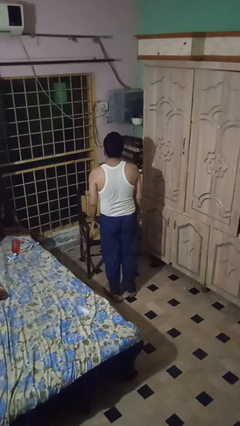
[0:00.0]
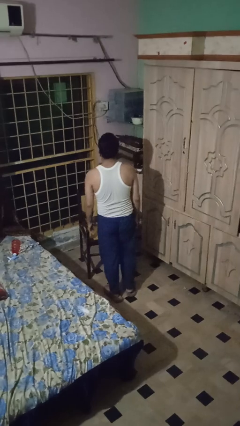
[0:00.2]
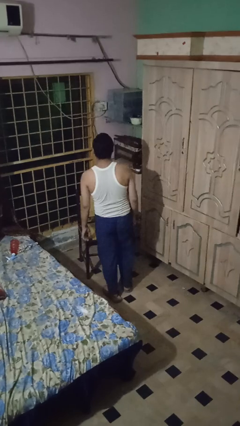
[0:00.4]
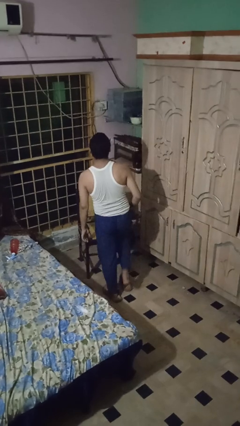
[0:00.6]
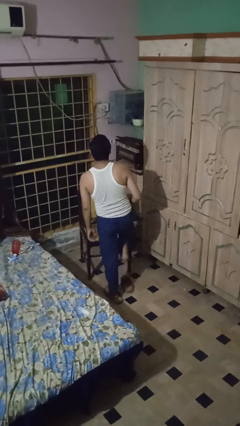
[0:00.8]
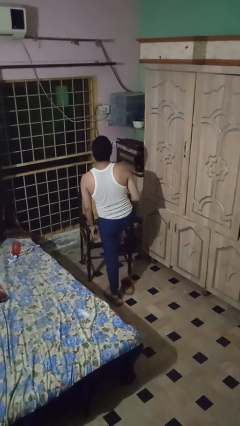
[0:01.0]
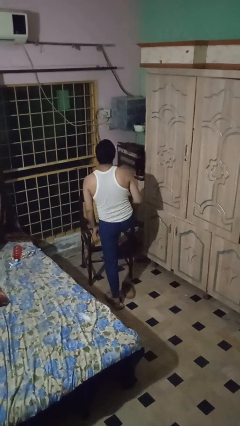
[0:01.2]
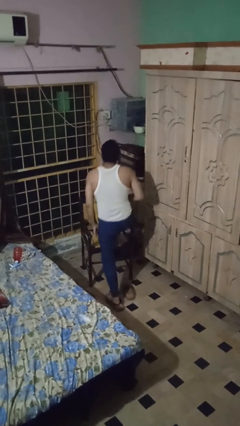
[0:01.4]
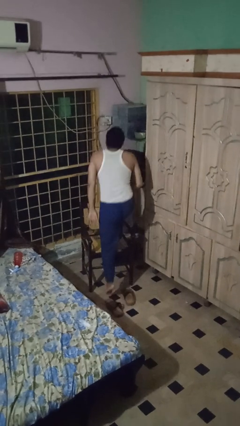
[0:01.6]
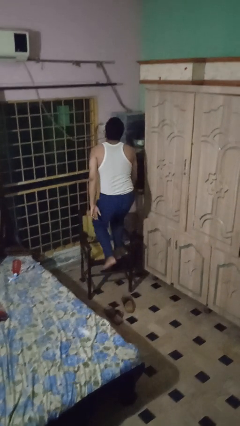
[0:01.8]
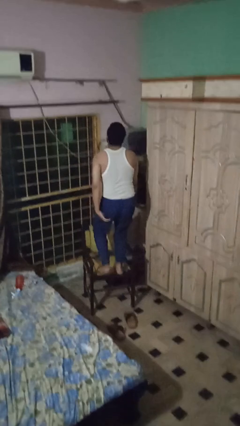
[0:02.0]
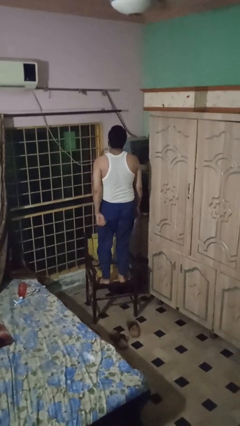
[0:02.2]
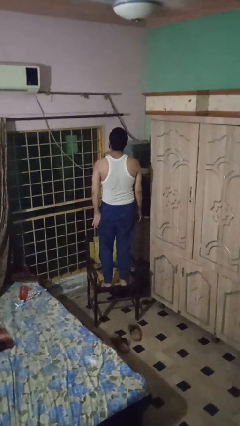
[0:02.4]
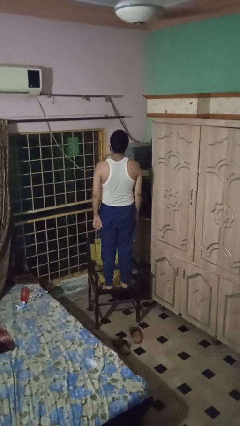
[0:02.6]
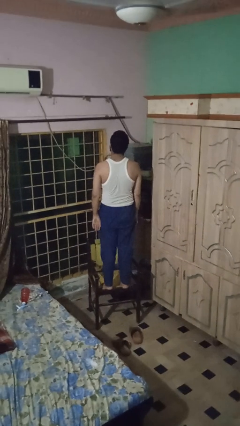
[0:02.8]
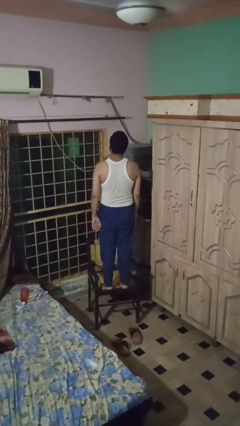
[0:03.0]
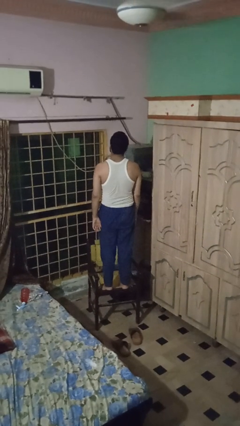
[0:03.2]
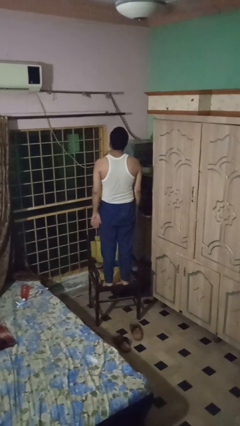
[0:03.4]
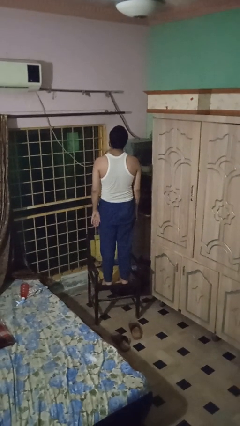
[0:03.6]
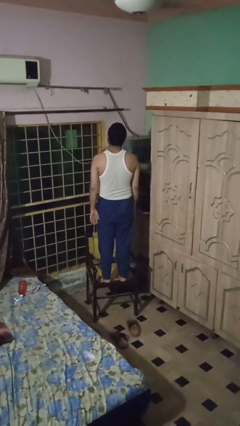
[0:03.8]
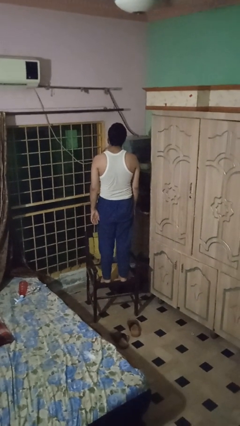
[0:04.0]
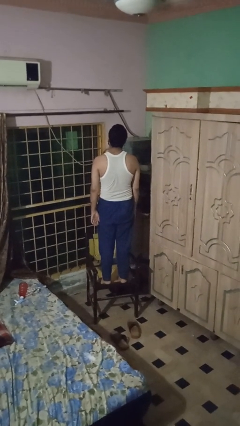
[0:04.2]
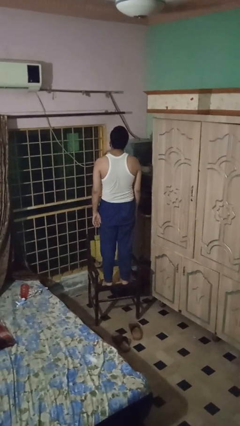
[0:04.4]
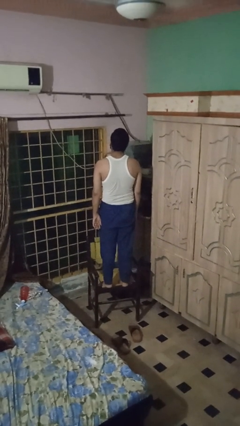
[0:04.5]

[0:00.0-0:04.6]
person climbs on chair

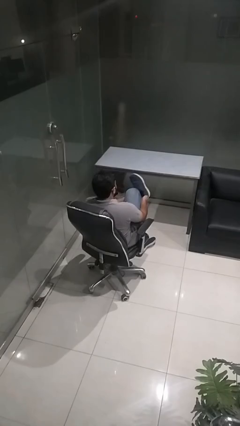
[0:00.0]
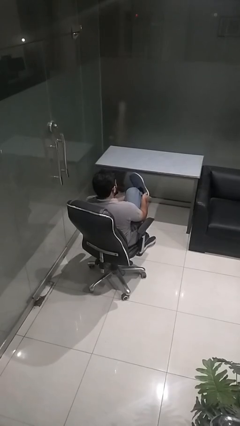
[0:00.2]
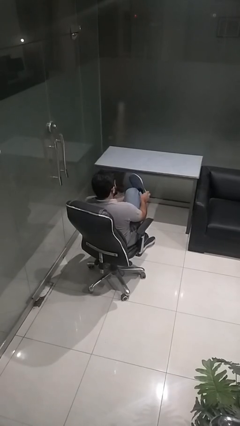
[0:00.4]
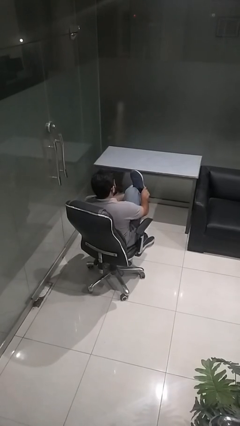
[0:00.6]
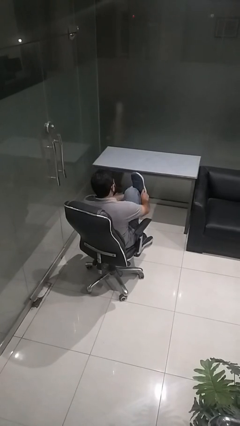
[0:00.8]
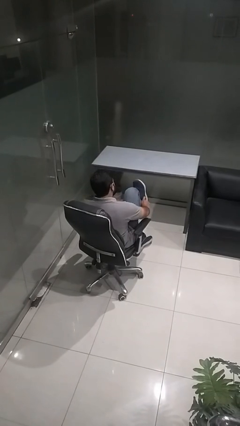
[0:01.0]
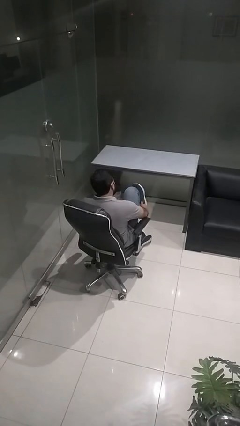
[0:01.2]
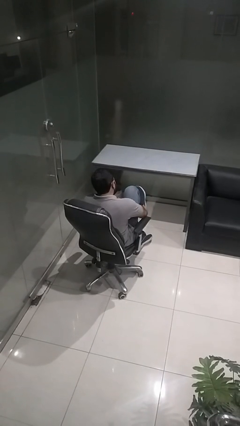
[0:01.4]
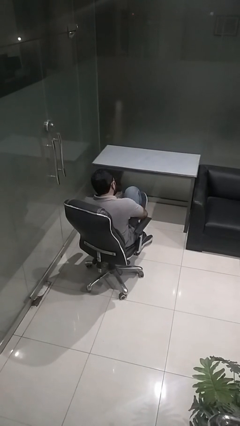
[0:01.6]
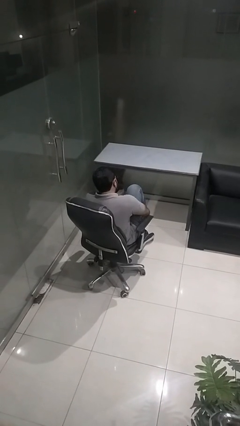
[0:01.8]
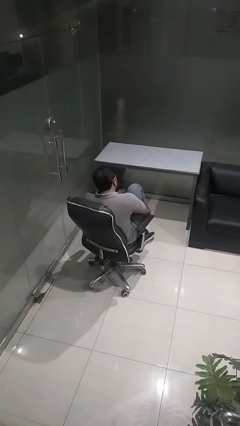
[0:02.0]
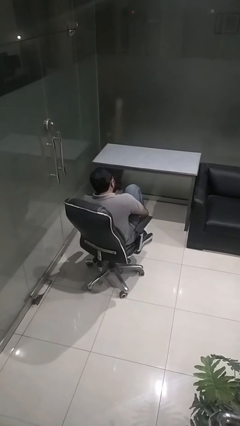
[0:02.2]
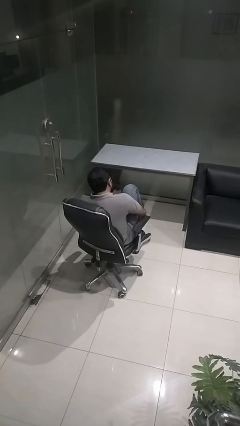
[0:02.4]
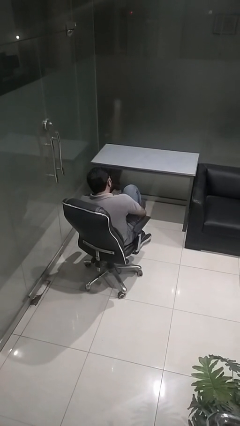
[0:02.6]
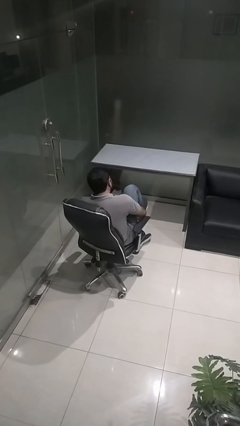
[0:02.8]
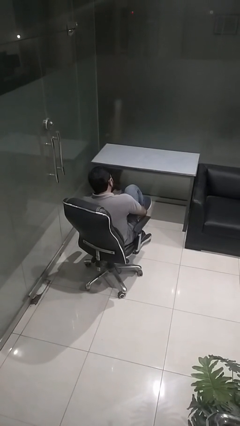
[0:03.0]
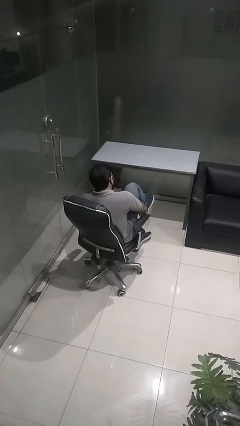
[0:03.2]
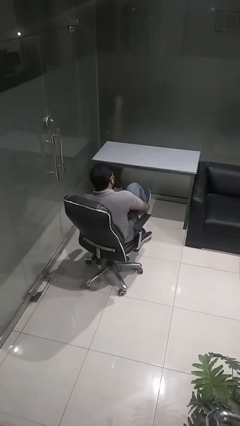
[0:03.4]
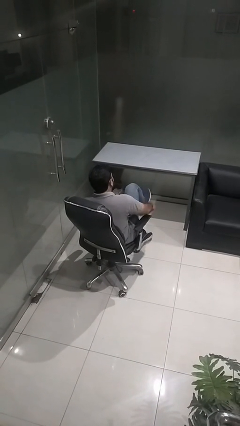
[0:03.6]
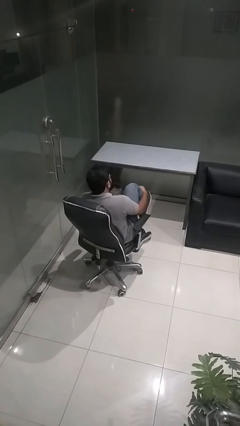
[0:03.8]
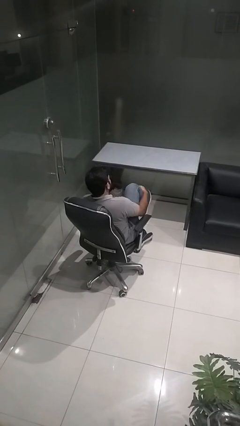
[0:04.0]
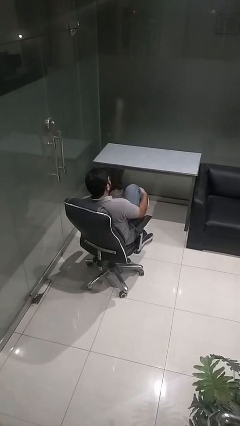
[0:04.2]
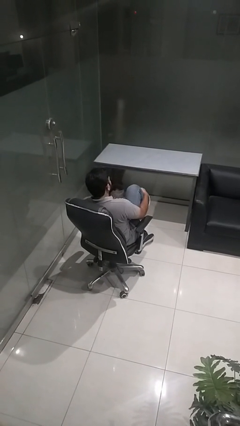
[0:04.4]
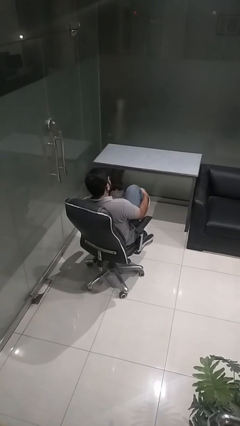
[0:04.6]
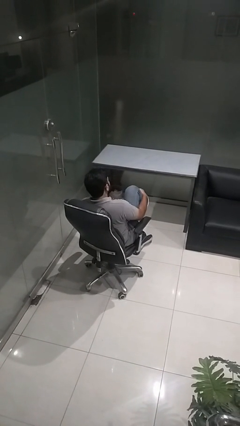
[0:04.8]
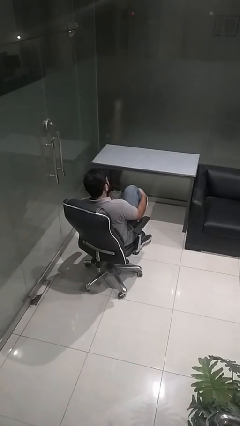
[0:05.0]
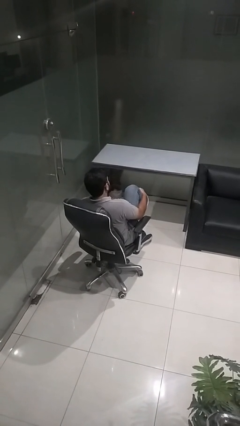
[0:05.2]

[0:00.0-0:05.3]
person puts on shoes

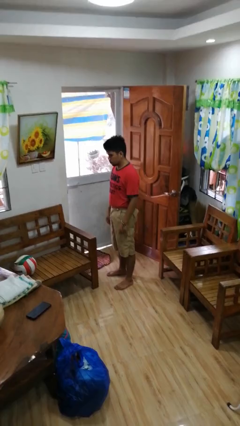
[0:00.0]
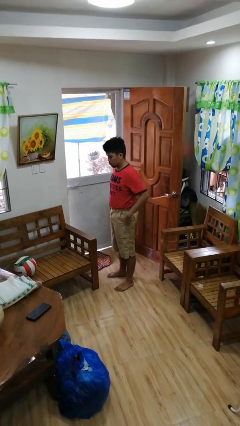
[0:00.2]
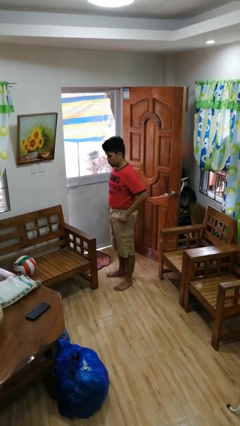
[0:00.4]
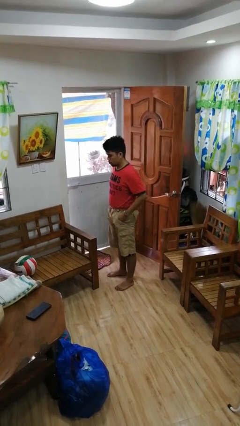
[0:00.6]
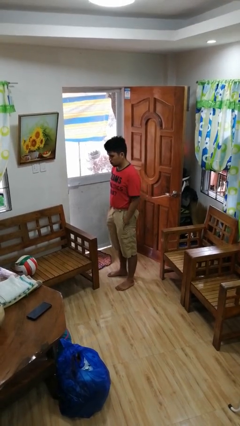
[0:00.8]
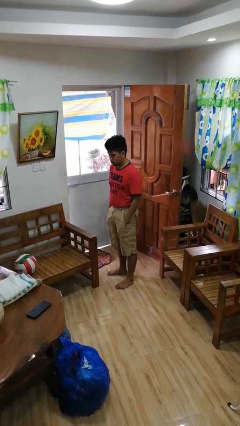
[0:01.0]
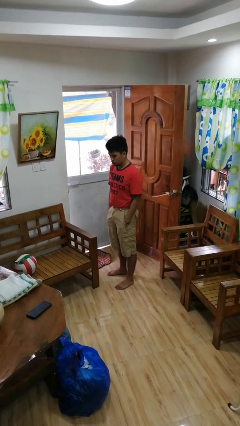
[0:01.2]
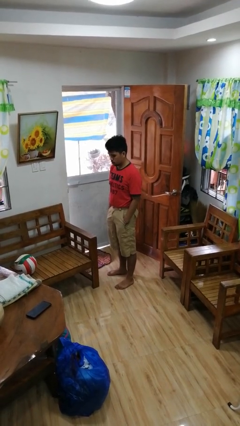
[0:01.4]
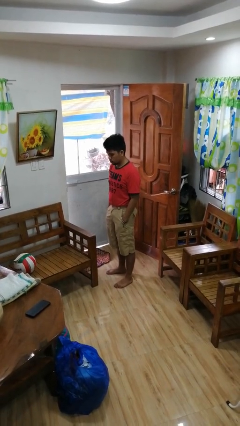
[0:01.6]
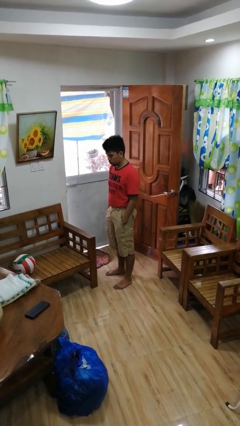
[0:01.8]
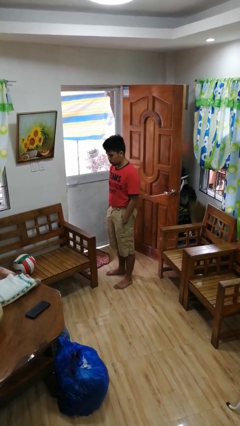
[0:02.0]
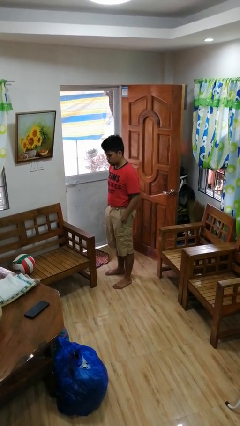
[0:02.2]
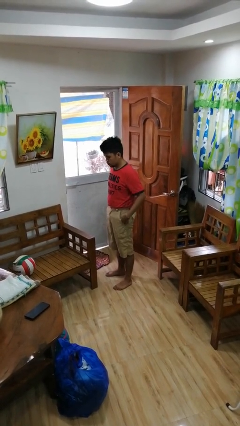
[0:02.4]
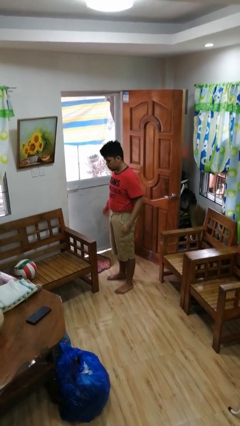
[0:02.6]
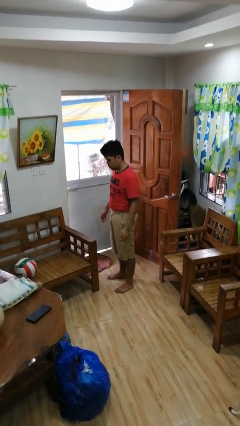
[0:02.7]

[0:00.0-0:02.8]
person puts hands in back pockets

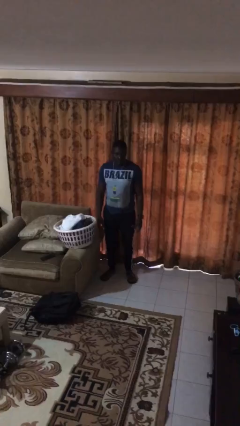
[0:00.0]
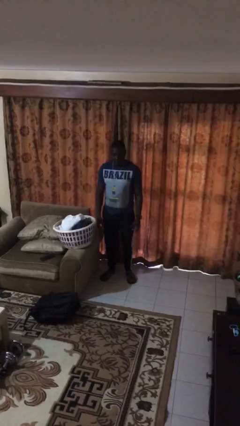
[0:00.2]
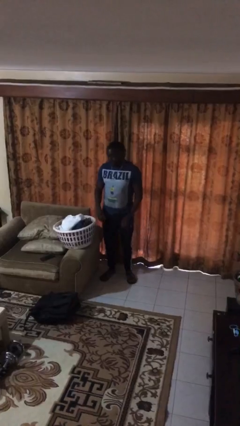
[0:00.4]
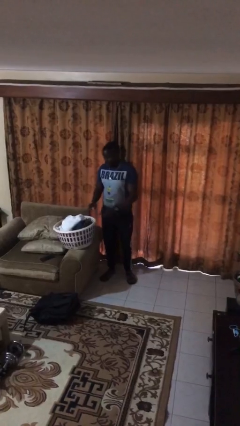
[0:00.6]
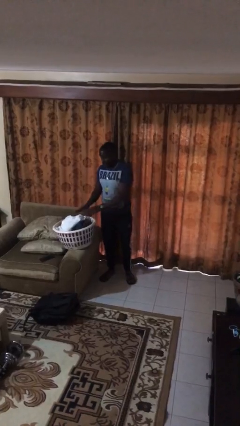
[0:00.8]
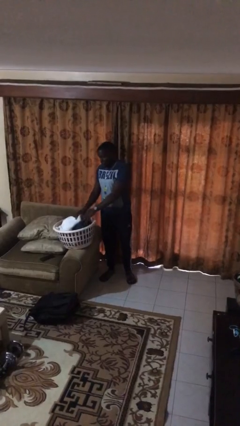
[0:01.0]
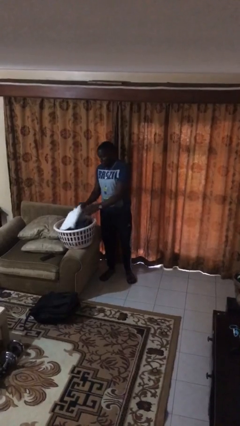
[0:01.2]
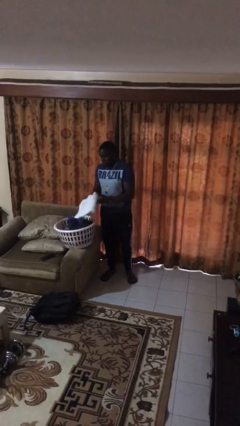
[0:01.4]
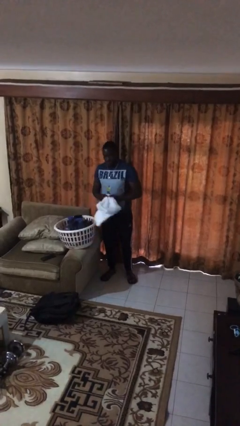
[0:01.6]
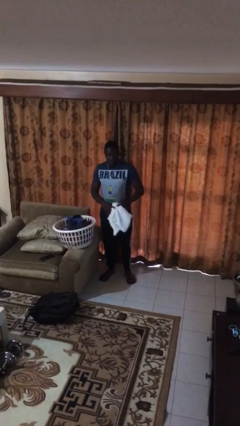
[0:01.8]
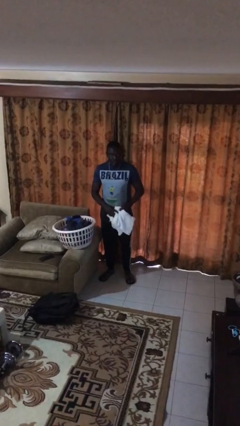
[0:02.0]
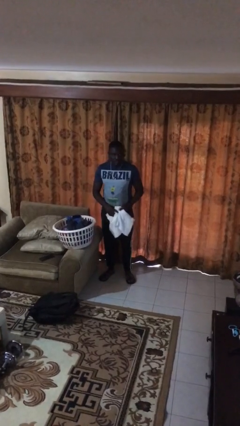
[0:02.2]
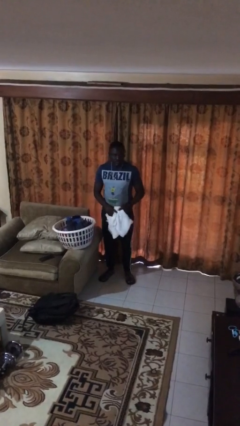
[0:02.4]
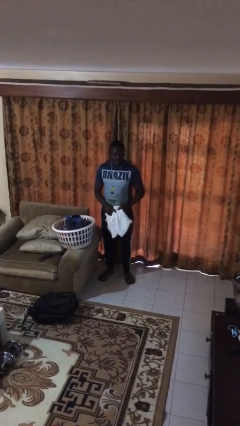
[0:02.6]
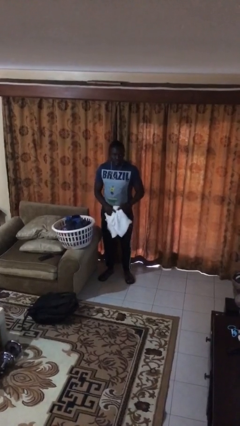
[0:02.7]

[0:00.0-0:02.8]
person takes object from basket

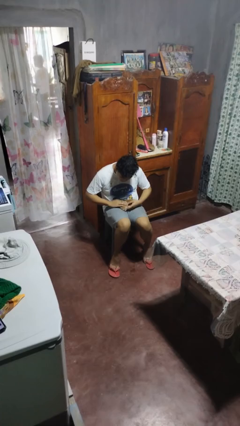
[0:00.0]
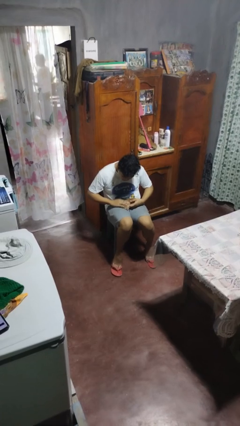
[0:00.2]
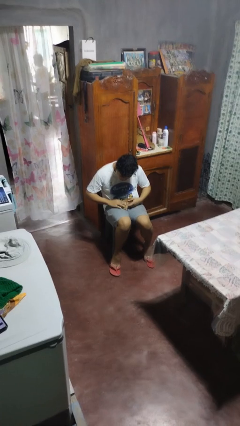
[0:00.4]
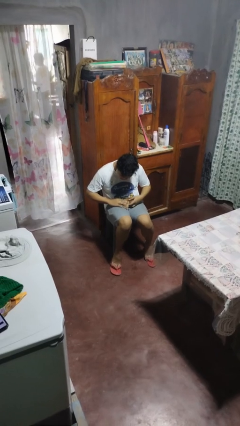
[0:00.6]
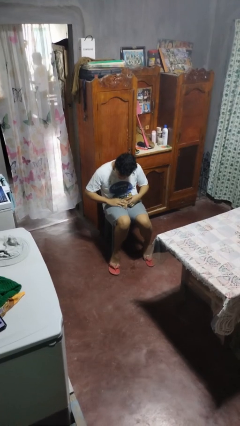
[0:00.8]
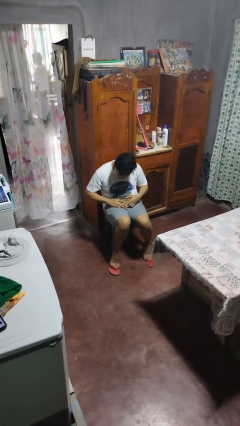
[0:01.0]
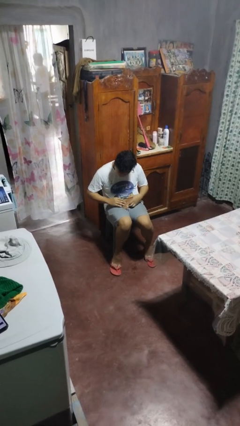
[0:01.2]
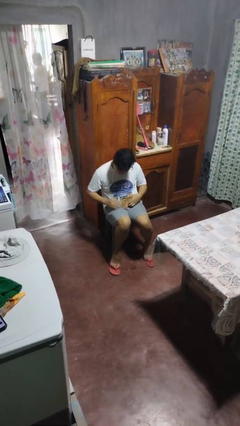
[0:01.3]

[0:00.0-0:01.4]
person pets cat

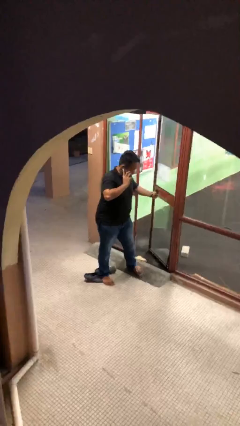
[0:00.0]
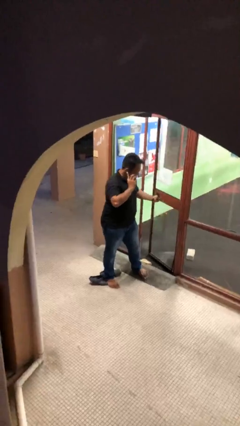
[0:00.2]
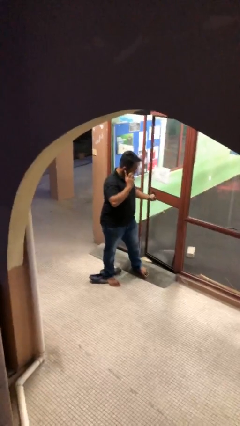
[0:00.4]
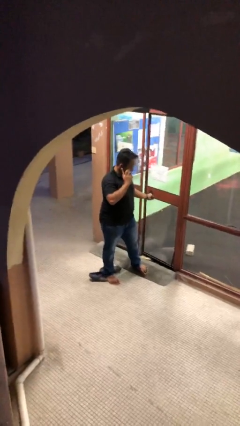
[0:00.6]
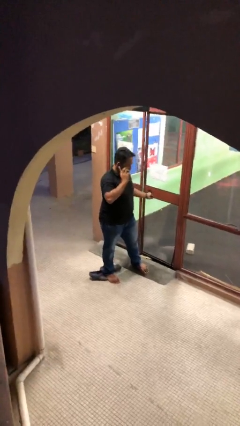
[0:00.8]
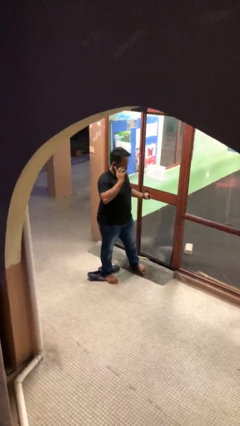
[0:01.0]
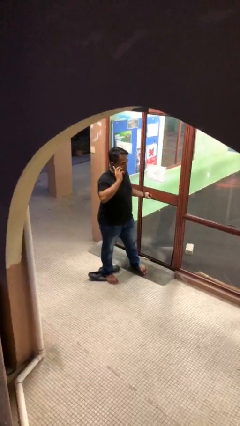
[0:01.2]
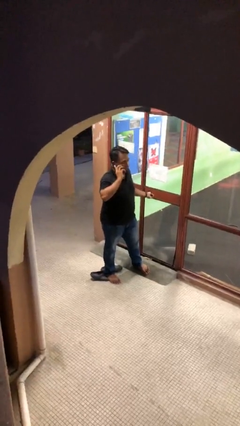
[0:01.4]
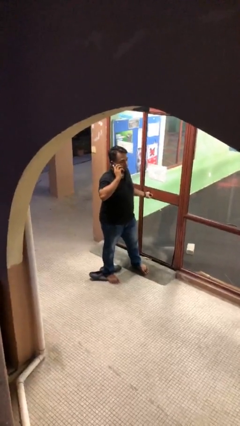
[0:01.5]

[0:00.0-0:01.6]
person closes facility door
